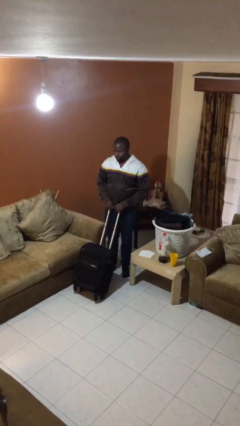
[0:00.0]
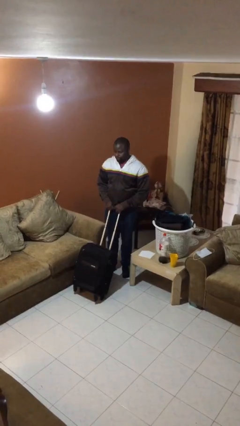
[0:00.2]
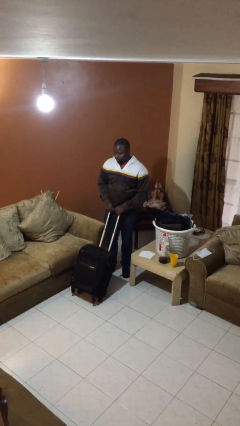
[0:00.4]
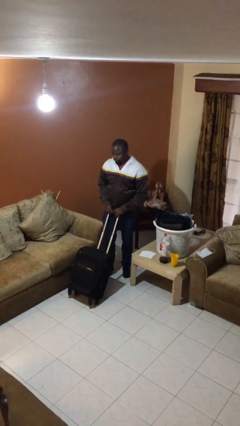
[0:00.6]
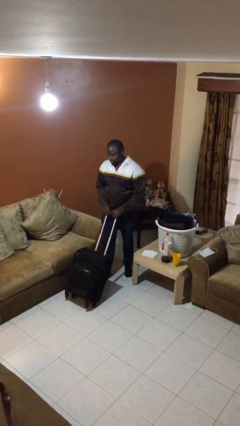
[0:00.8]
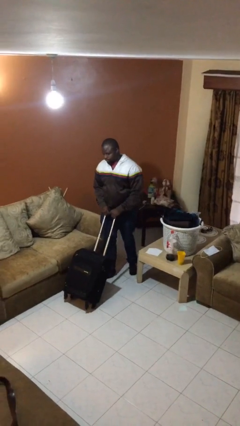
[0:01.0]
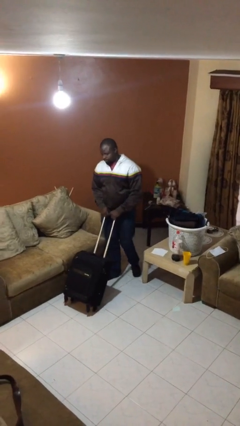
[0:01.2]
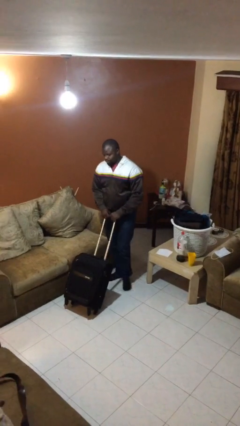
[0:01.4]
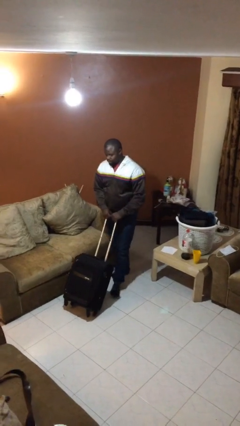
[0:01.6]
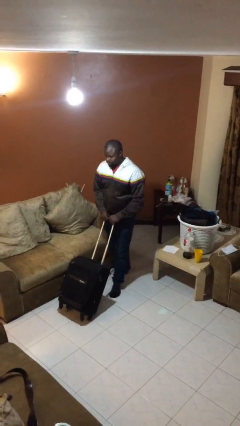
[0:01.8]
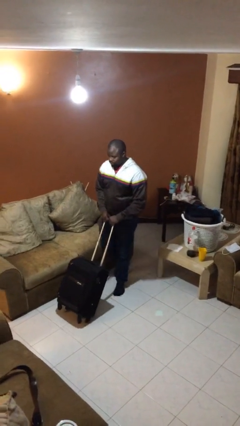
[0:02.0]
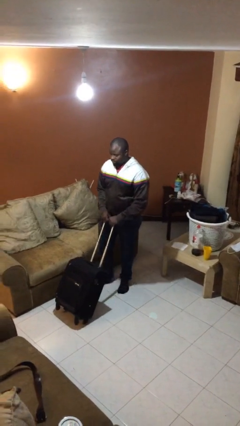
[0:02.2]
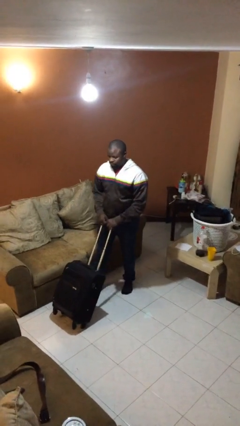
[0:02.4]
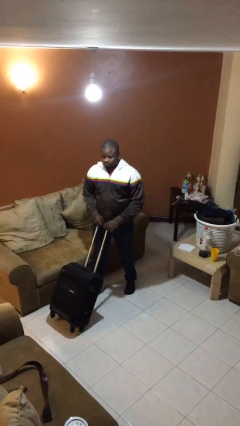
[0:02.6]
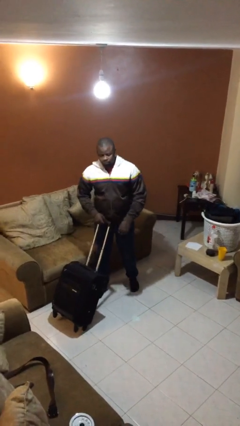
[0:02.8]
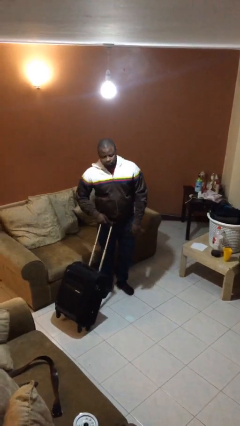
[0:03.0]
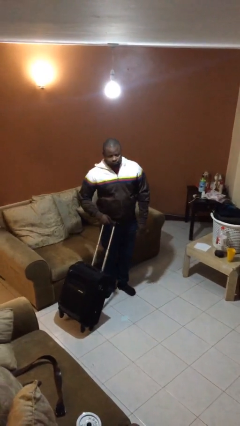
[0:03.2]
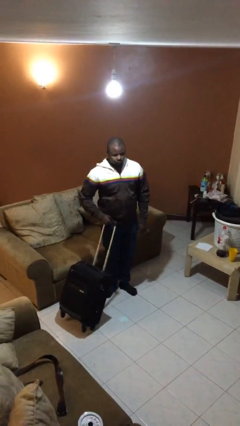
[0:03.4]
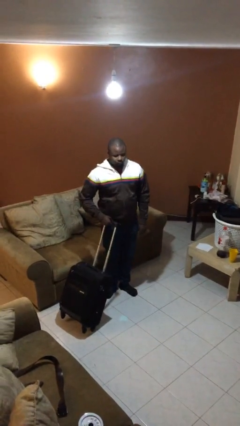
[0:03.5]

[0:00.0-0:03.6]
person pushes wheeled cart

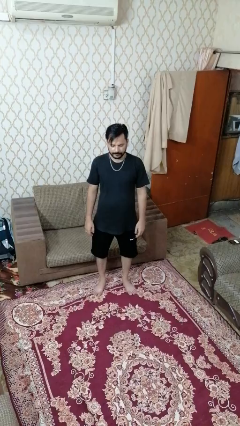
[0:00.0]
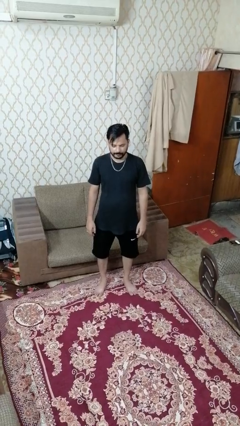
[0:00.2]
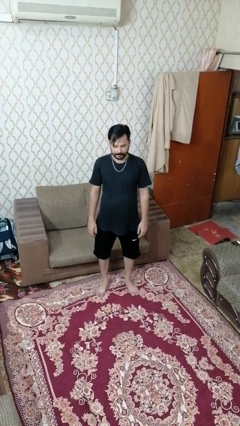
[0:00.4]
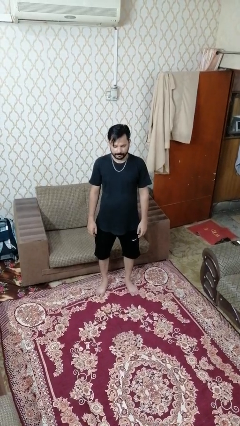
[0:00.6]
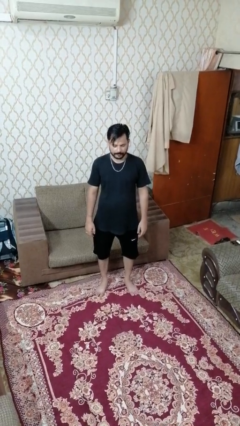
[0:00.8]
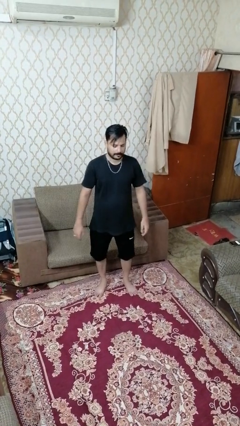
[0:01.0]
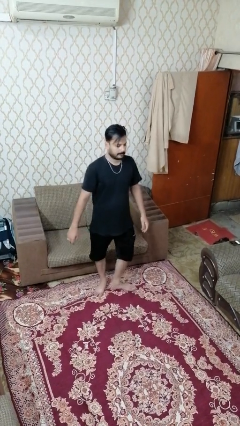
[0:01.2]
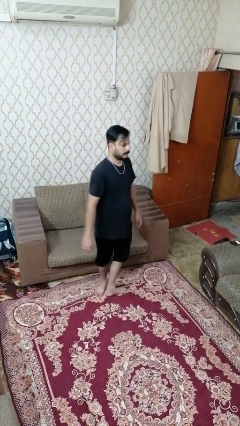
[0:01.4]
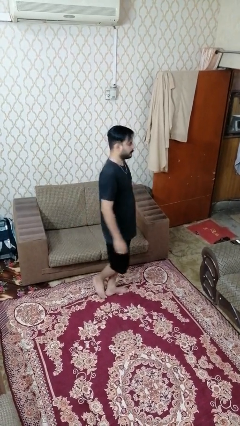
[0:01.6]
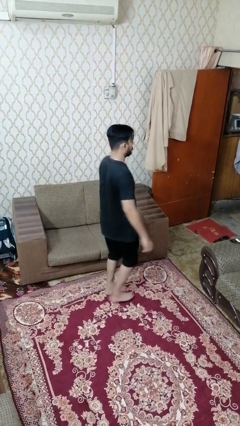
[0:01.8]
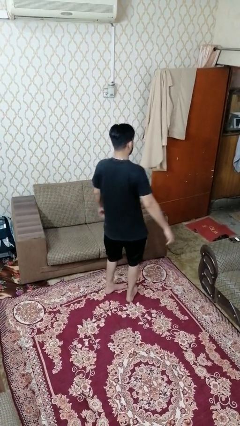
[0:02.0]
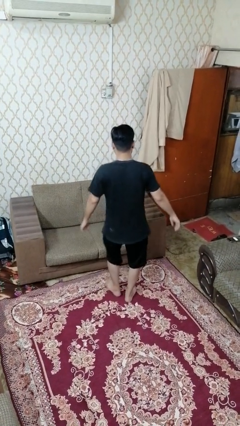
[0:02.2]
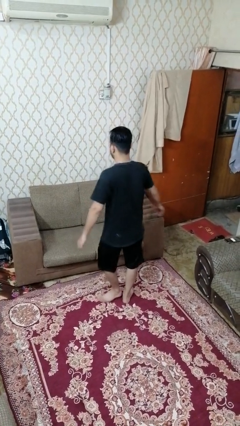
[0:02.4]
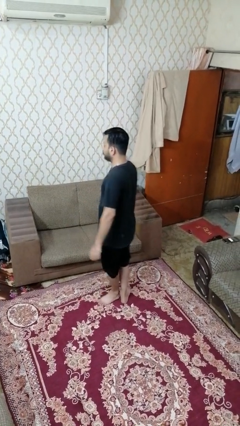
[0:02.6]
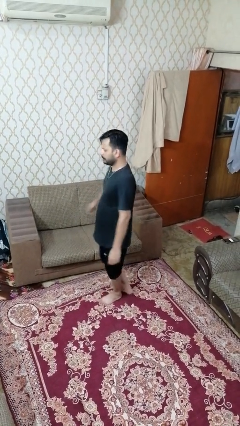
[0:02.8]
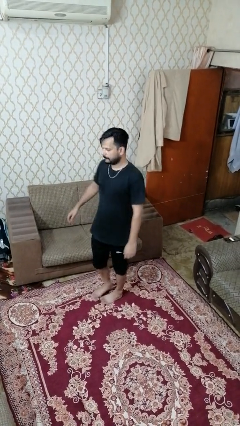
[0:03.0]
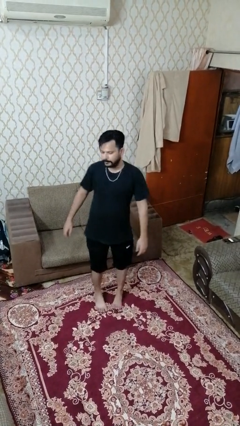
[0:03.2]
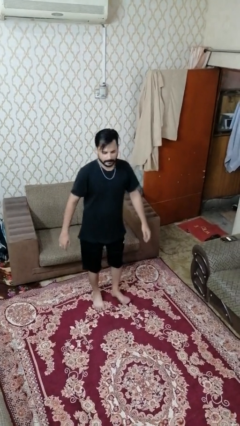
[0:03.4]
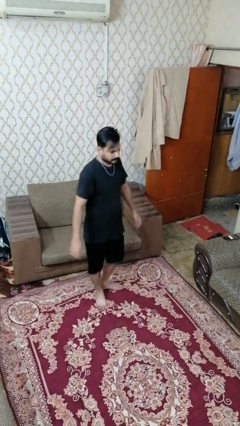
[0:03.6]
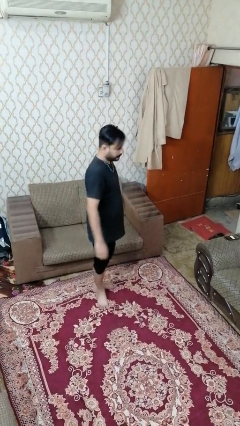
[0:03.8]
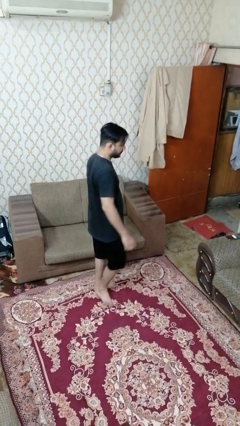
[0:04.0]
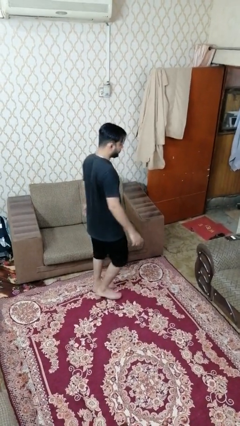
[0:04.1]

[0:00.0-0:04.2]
person twirls

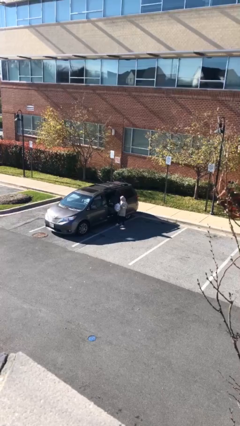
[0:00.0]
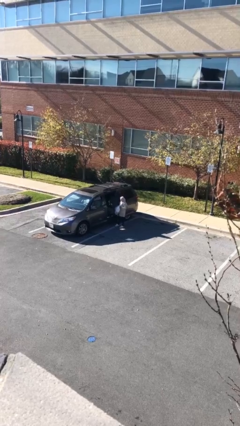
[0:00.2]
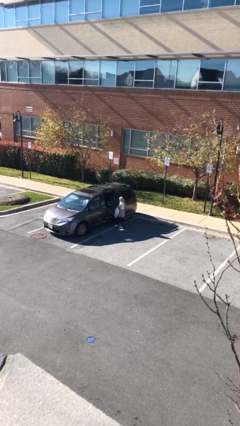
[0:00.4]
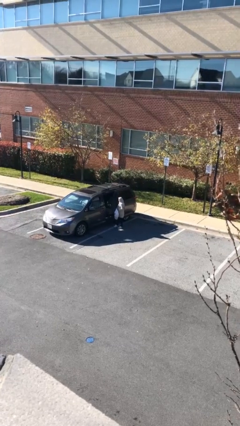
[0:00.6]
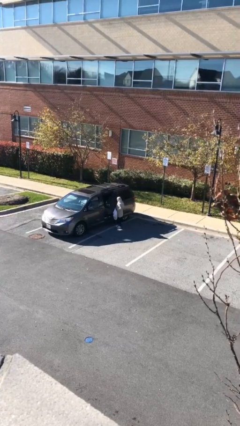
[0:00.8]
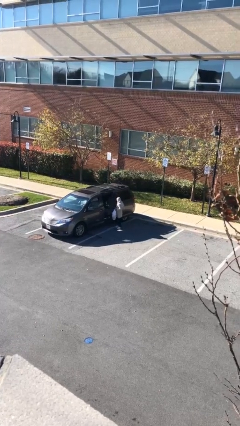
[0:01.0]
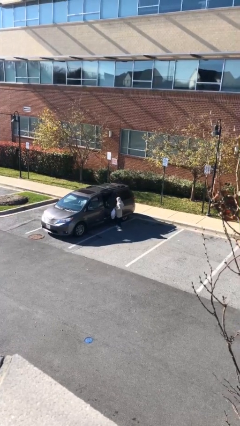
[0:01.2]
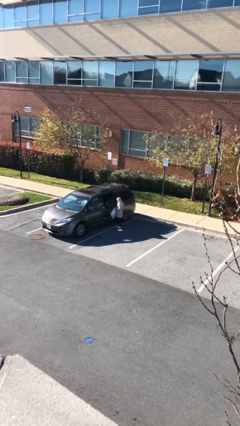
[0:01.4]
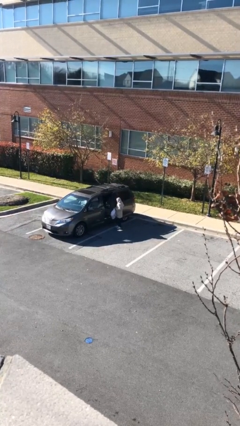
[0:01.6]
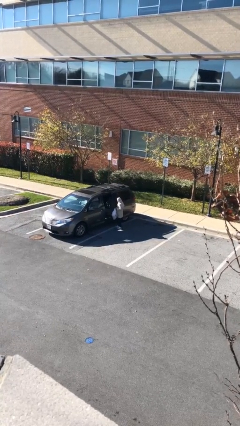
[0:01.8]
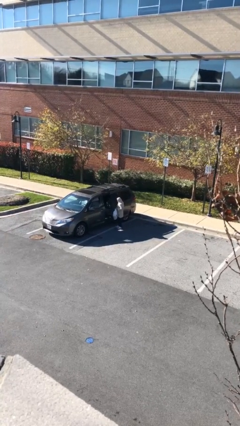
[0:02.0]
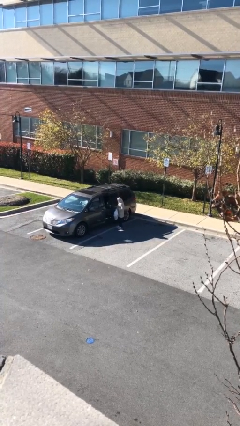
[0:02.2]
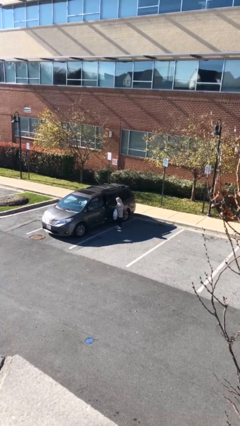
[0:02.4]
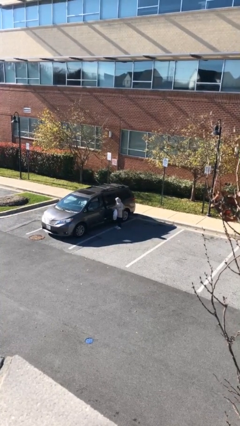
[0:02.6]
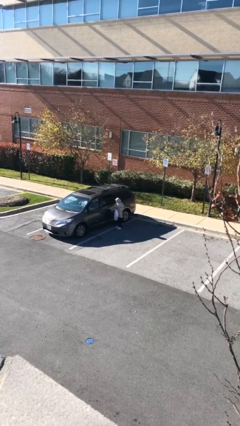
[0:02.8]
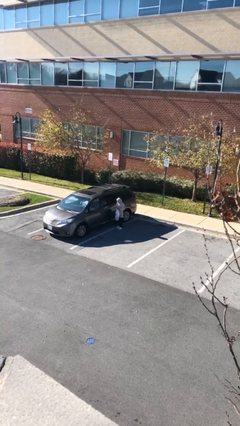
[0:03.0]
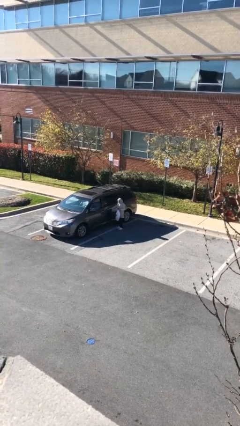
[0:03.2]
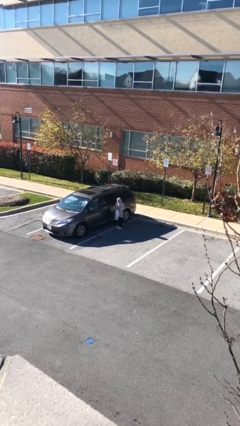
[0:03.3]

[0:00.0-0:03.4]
person closes car door

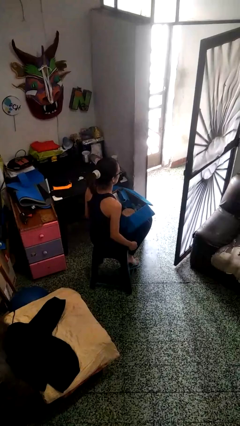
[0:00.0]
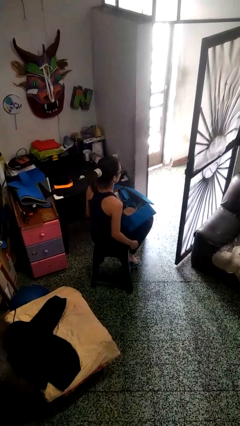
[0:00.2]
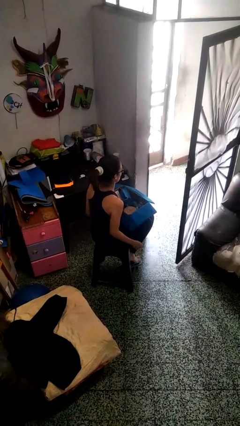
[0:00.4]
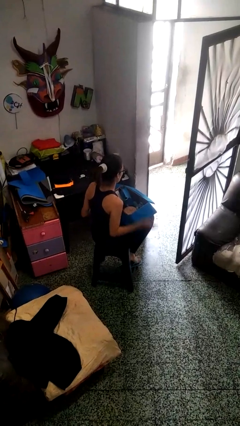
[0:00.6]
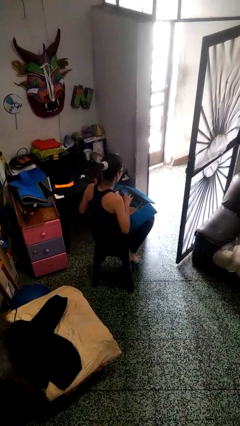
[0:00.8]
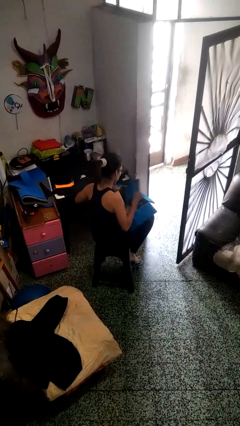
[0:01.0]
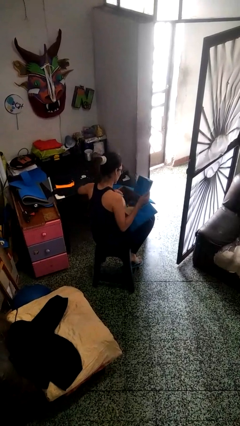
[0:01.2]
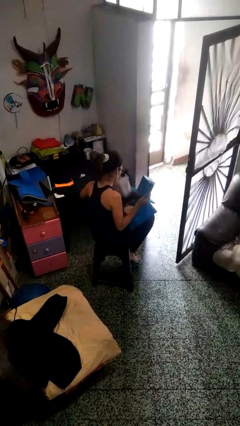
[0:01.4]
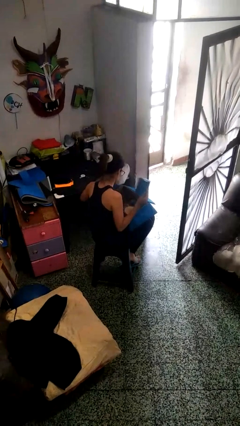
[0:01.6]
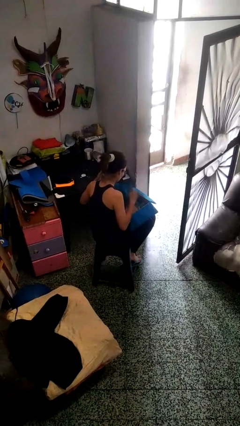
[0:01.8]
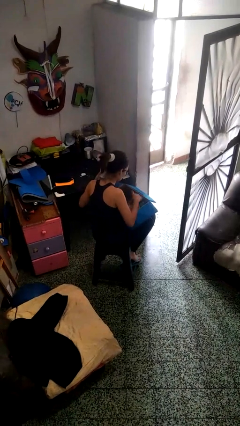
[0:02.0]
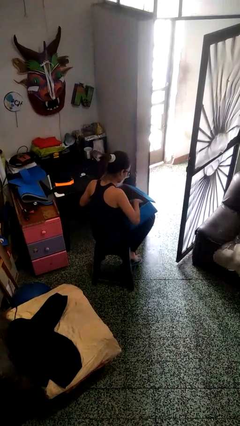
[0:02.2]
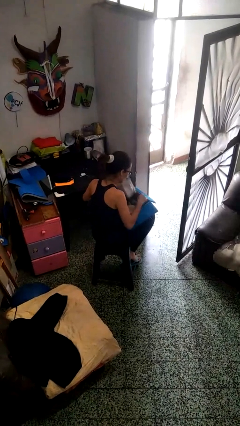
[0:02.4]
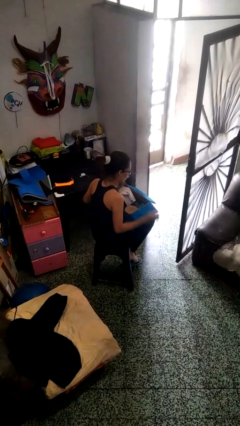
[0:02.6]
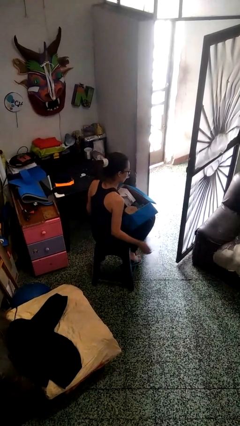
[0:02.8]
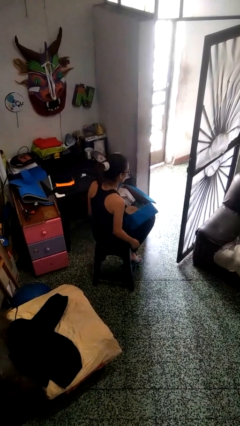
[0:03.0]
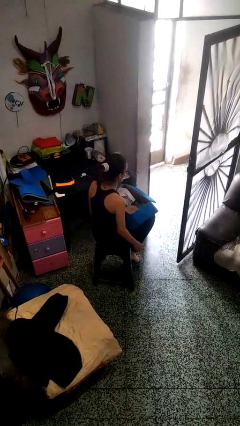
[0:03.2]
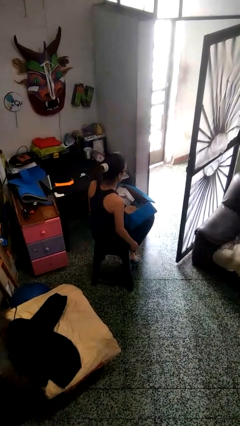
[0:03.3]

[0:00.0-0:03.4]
person searches in box

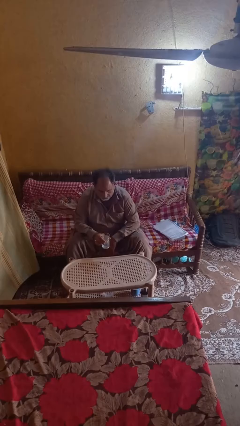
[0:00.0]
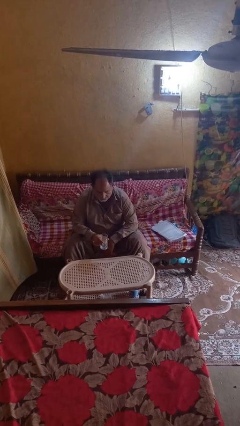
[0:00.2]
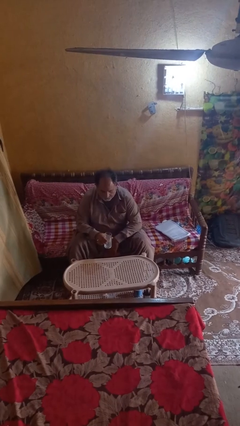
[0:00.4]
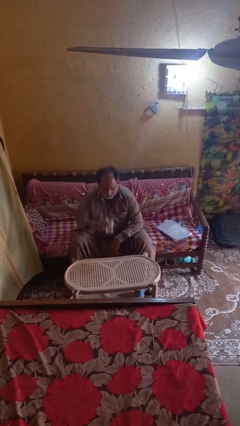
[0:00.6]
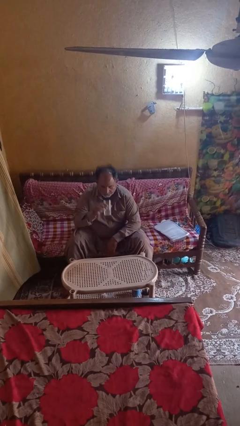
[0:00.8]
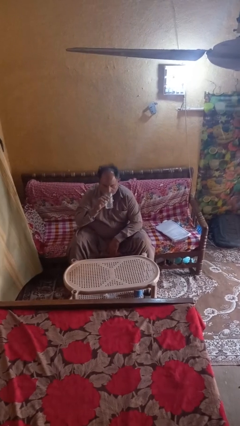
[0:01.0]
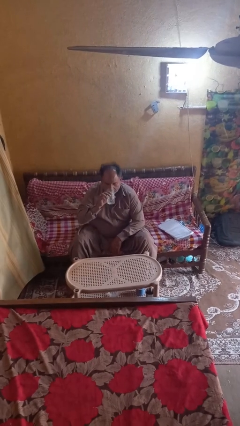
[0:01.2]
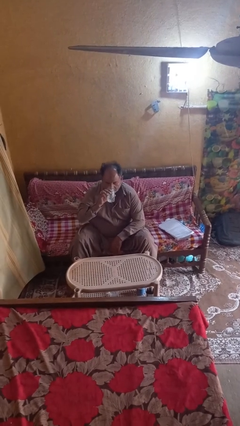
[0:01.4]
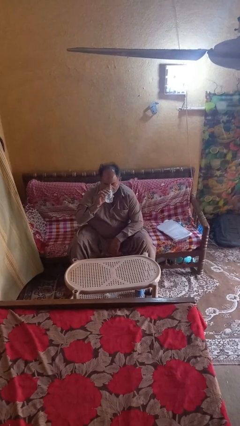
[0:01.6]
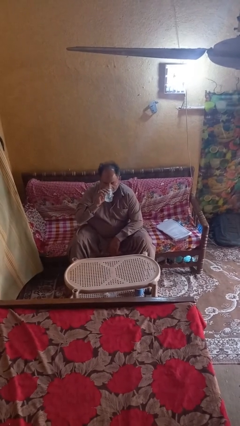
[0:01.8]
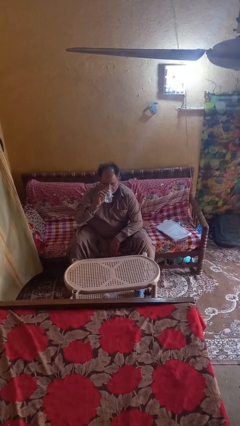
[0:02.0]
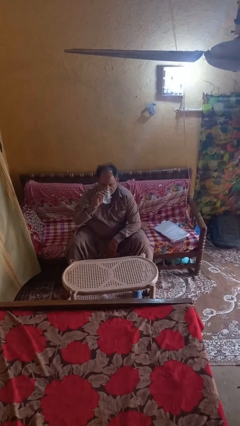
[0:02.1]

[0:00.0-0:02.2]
person drinks from shotglass

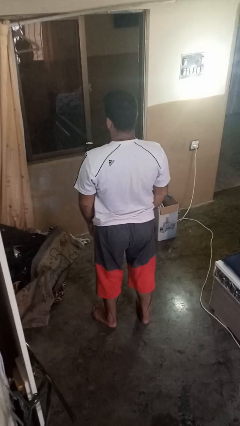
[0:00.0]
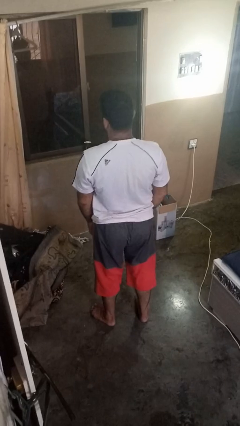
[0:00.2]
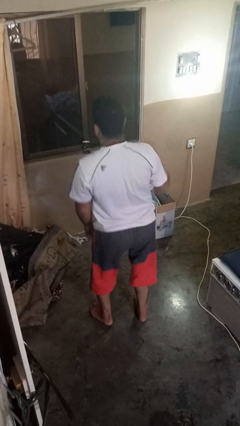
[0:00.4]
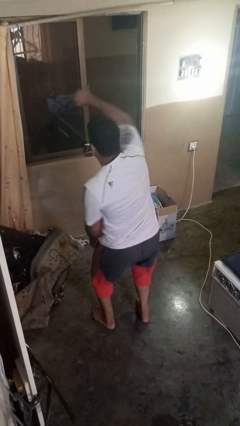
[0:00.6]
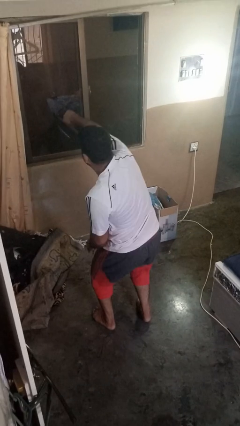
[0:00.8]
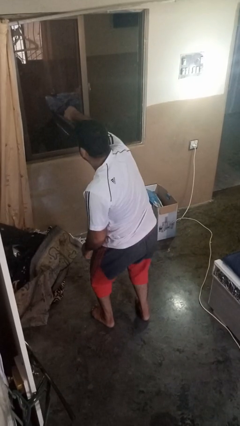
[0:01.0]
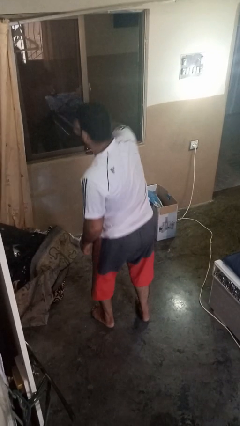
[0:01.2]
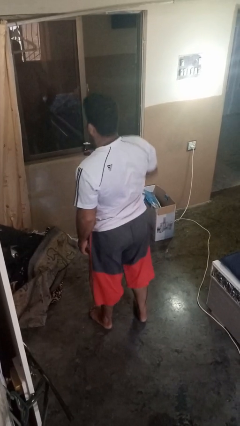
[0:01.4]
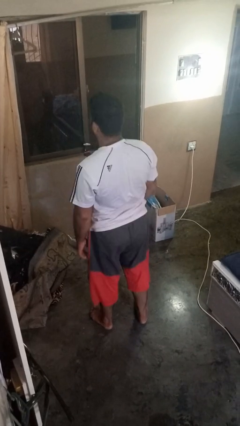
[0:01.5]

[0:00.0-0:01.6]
person karate chop
